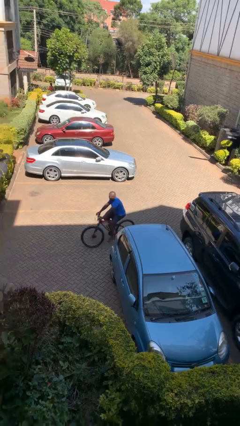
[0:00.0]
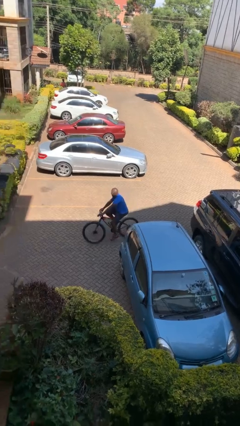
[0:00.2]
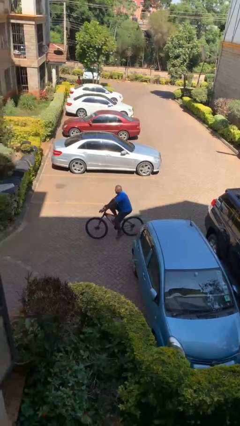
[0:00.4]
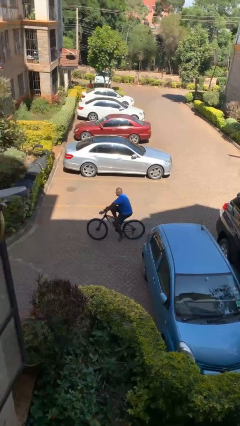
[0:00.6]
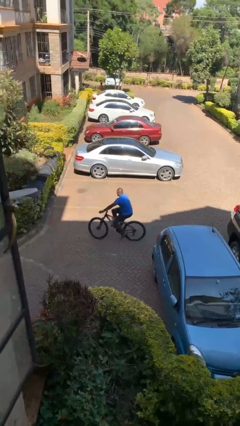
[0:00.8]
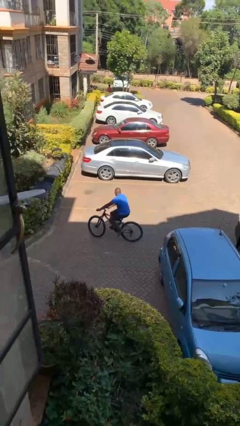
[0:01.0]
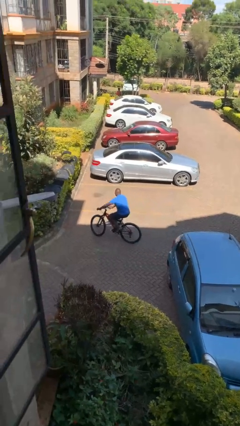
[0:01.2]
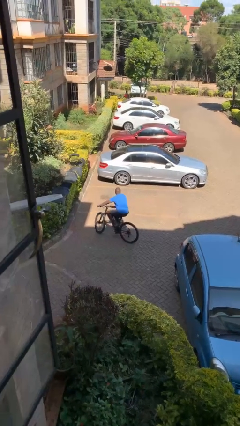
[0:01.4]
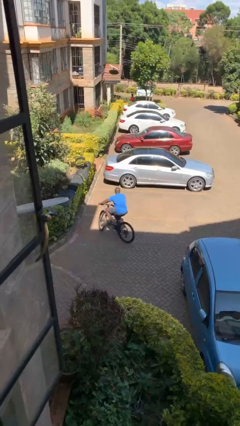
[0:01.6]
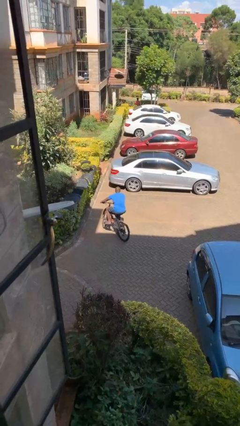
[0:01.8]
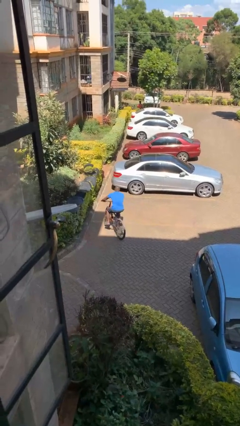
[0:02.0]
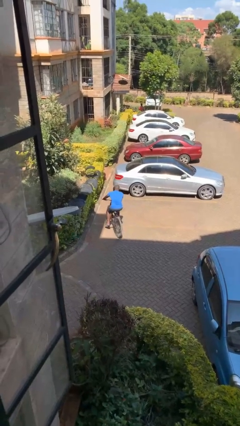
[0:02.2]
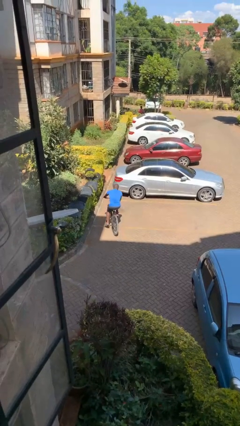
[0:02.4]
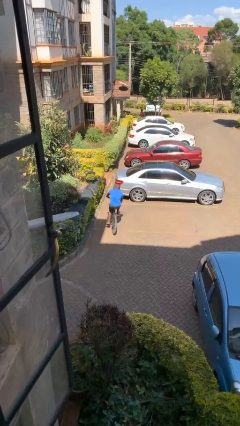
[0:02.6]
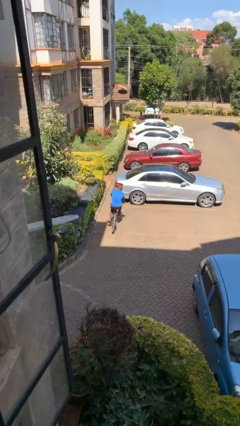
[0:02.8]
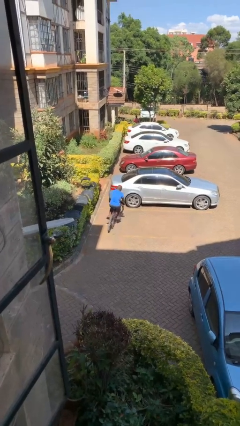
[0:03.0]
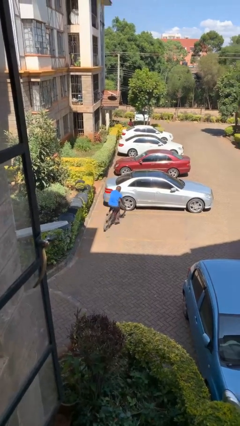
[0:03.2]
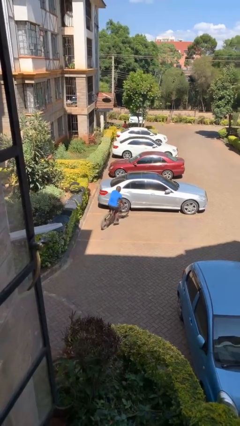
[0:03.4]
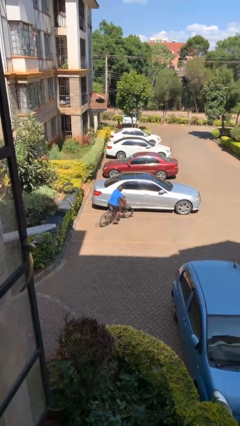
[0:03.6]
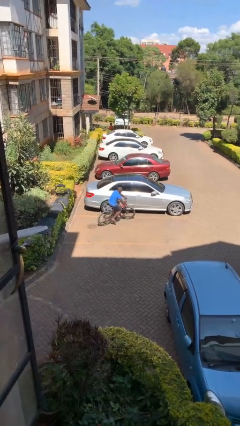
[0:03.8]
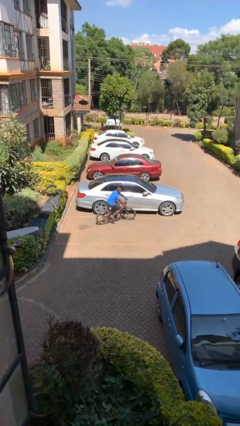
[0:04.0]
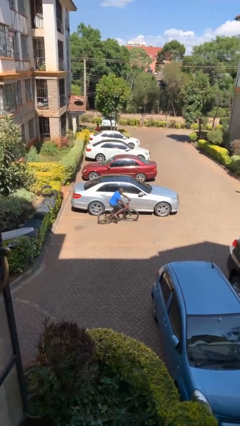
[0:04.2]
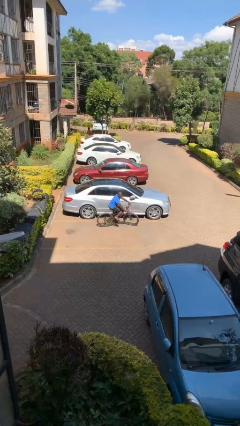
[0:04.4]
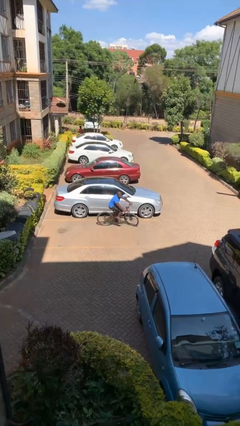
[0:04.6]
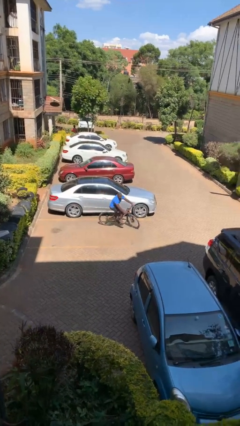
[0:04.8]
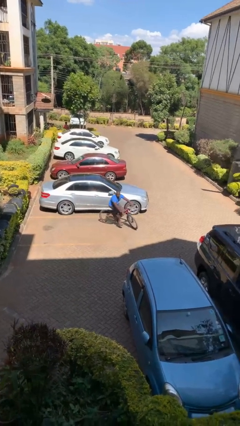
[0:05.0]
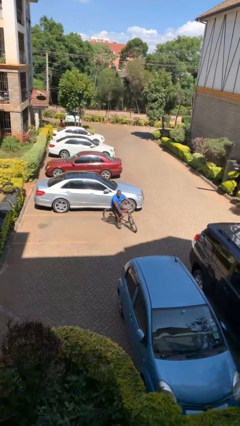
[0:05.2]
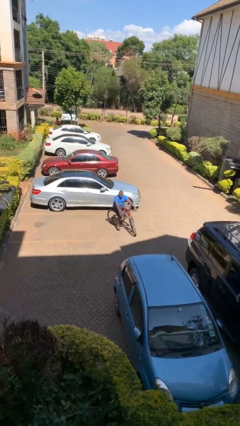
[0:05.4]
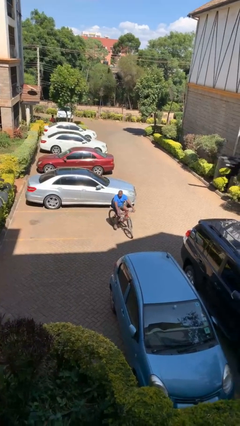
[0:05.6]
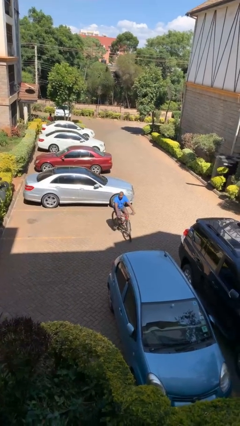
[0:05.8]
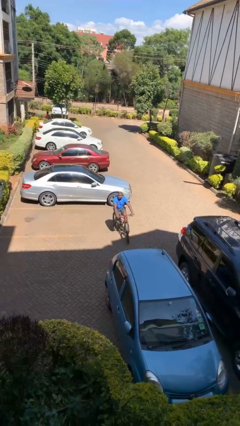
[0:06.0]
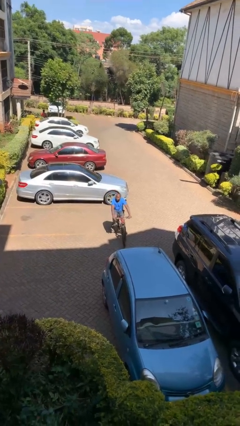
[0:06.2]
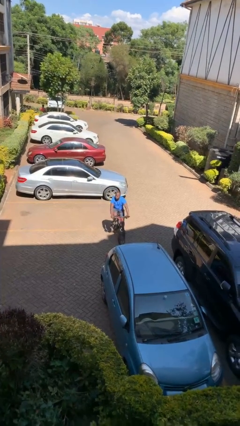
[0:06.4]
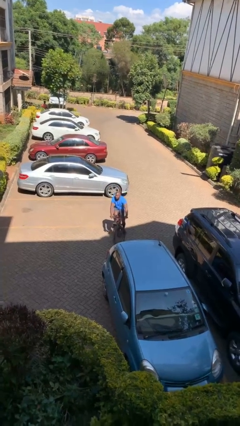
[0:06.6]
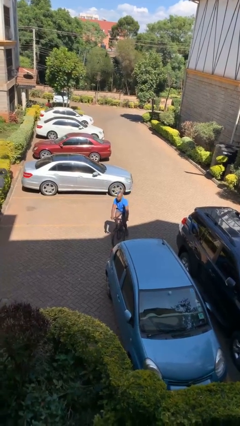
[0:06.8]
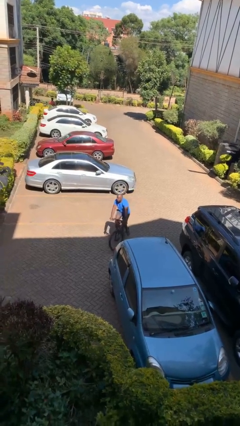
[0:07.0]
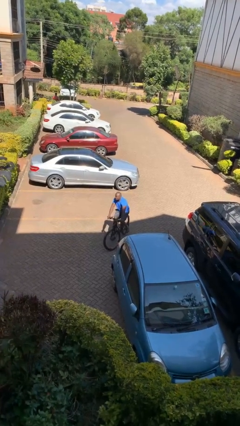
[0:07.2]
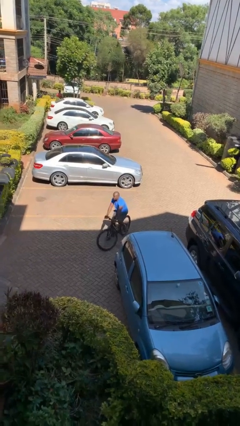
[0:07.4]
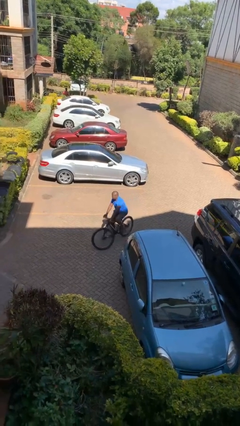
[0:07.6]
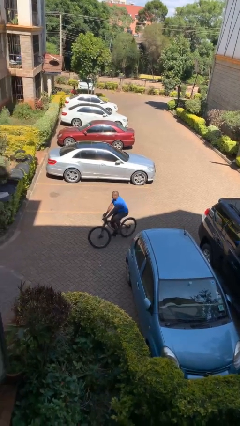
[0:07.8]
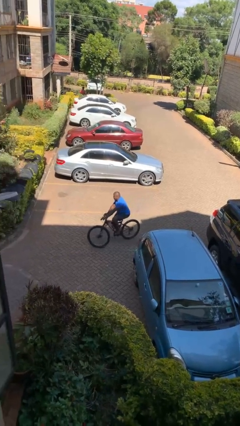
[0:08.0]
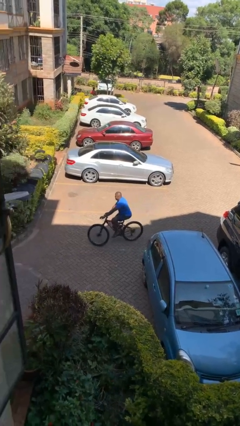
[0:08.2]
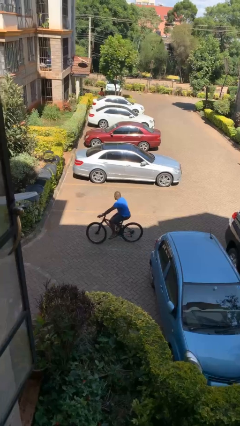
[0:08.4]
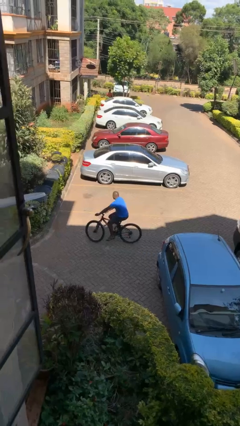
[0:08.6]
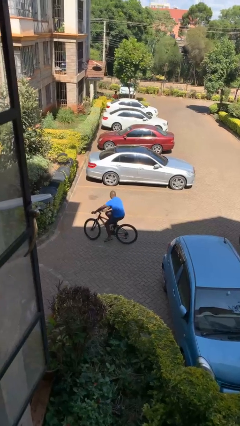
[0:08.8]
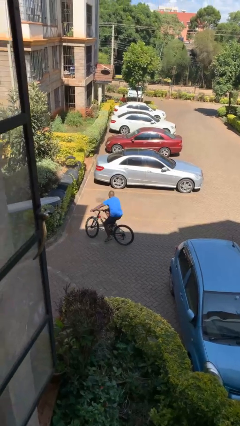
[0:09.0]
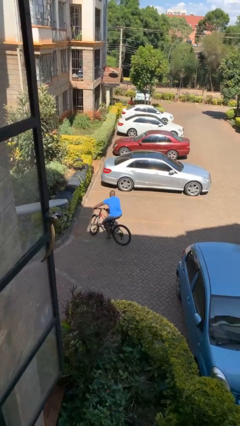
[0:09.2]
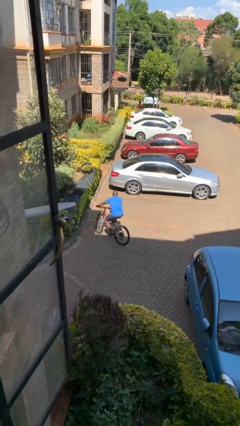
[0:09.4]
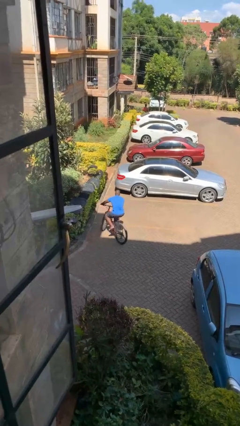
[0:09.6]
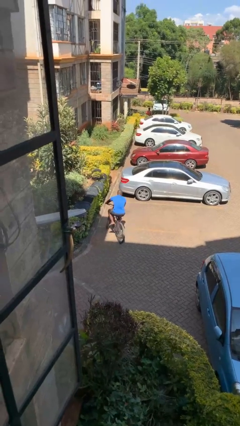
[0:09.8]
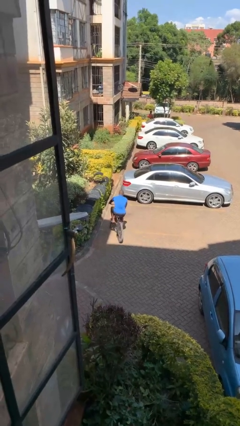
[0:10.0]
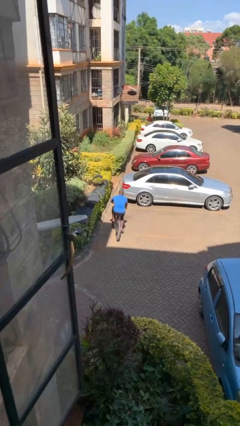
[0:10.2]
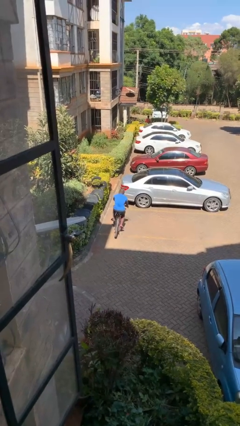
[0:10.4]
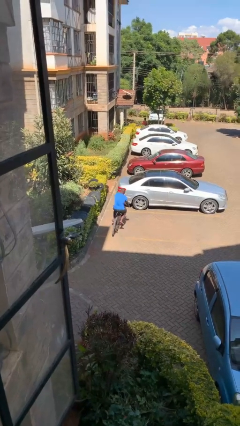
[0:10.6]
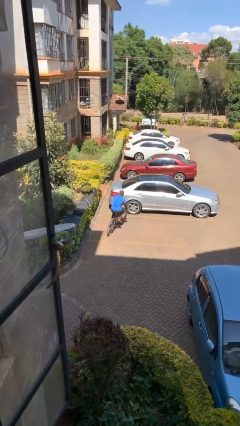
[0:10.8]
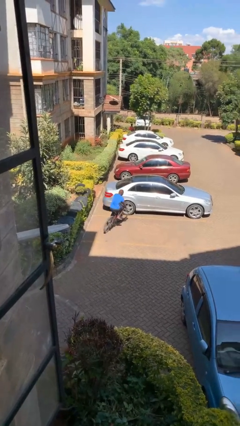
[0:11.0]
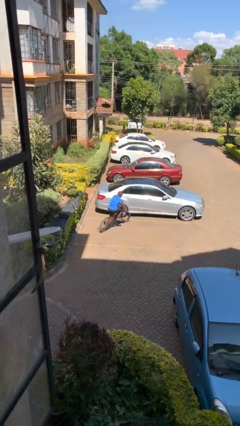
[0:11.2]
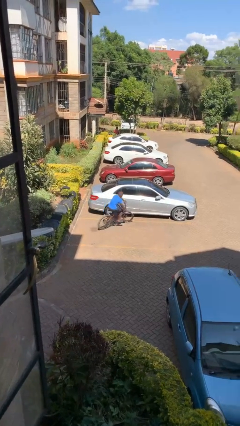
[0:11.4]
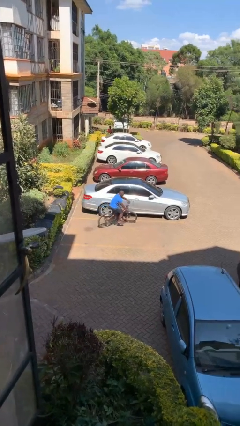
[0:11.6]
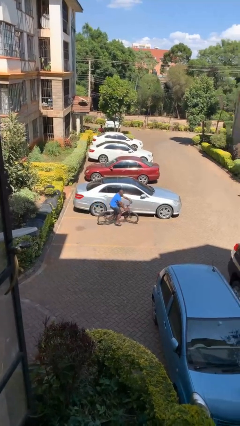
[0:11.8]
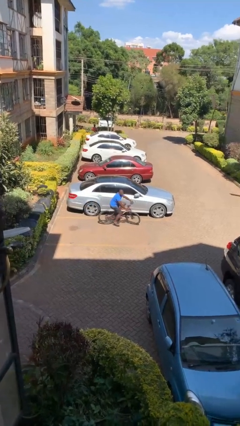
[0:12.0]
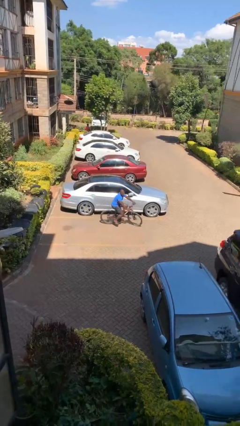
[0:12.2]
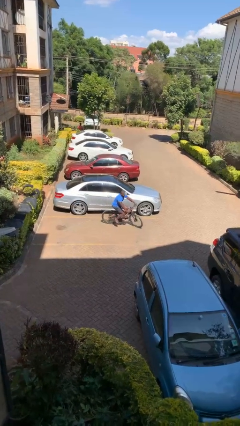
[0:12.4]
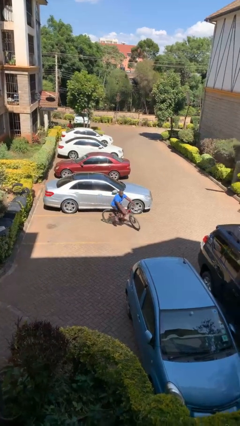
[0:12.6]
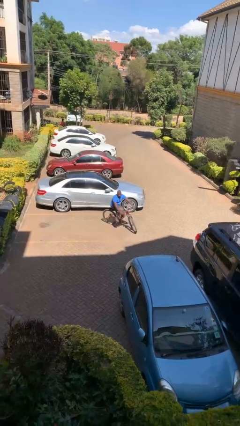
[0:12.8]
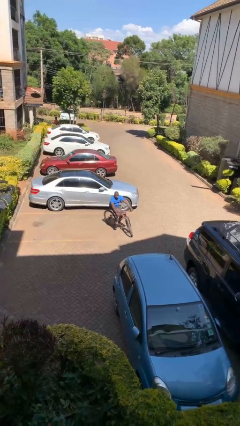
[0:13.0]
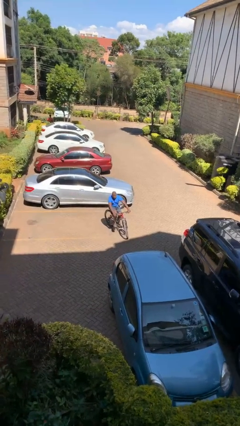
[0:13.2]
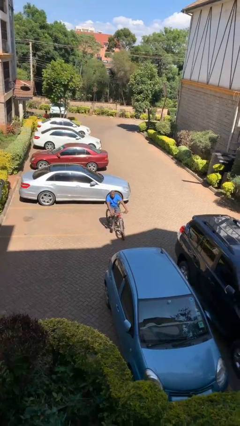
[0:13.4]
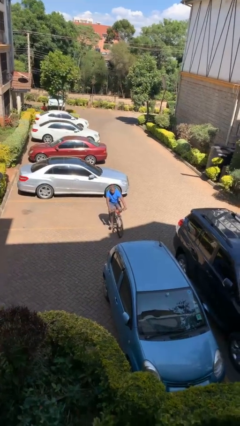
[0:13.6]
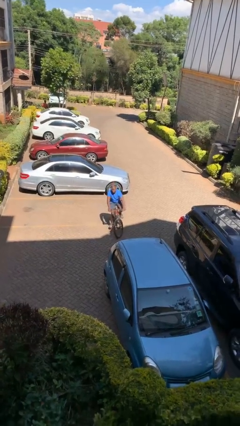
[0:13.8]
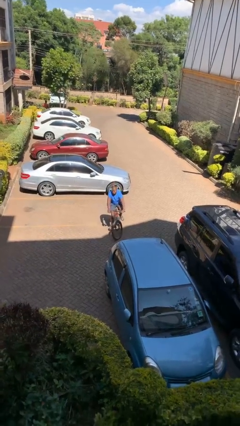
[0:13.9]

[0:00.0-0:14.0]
person rides bicycle

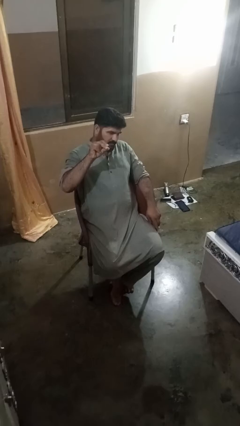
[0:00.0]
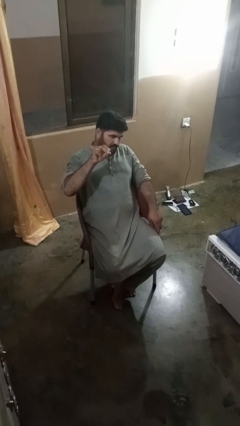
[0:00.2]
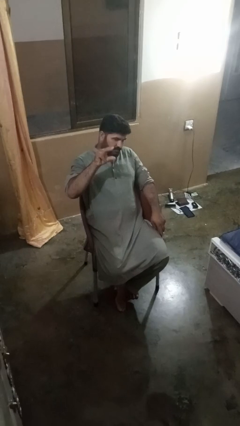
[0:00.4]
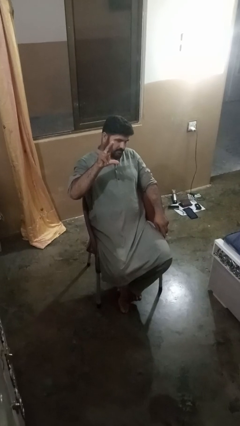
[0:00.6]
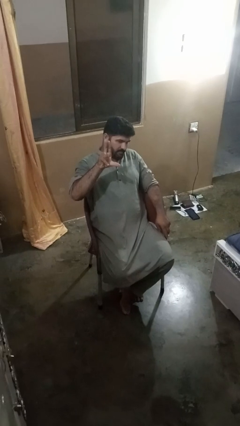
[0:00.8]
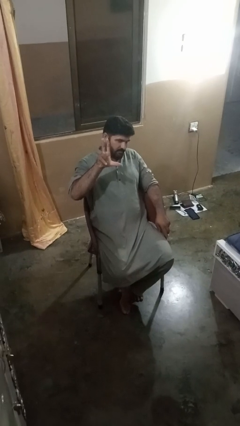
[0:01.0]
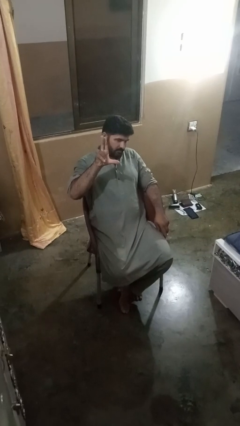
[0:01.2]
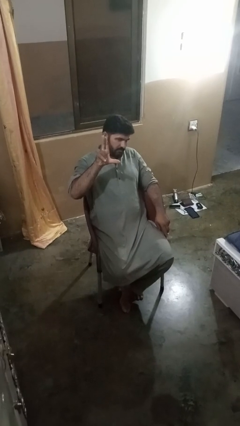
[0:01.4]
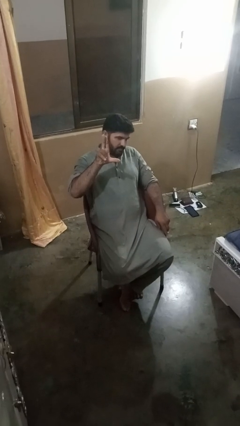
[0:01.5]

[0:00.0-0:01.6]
person gestures zoom out

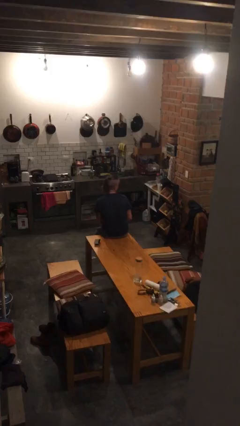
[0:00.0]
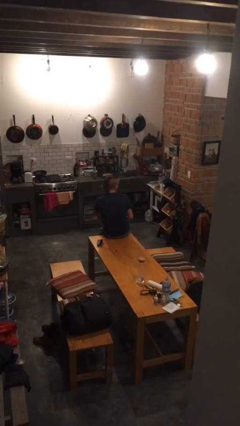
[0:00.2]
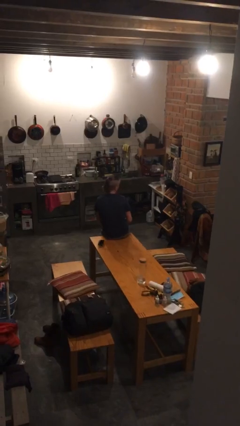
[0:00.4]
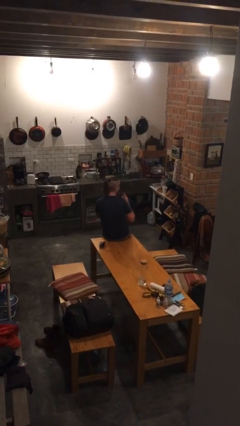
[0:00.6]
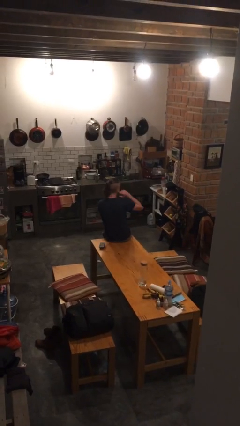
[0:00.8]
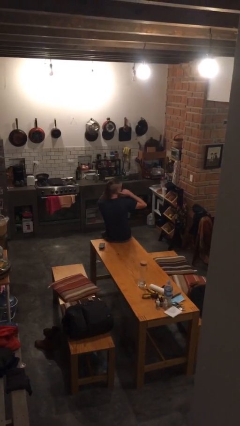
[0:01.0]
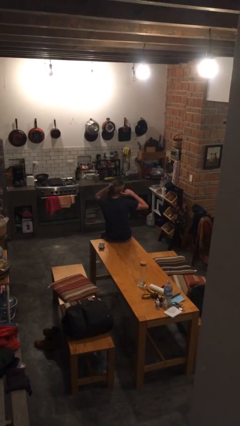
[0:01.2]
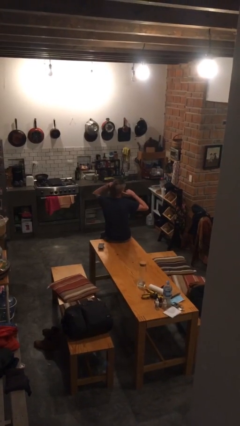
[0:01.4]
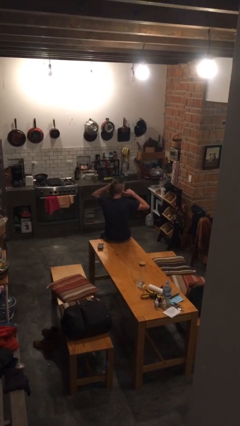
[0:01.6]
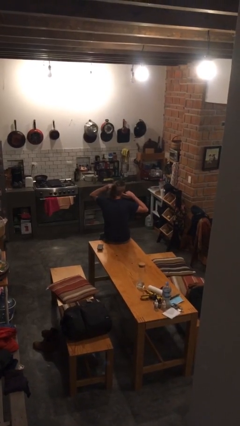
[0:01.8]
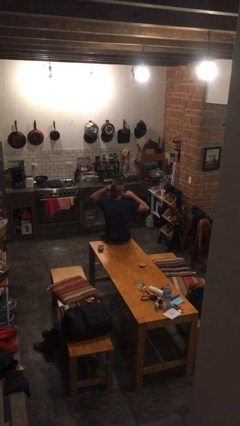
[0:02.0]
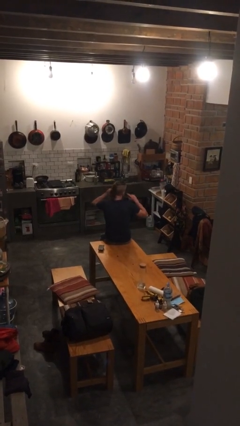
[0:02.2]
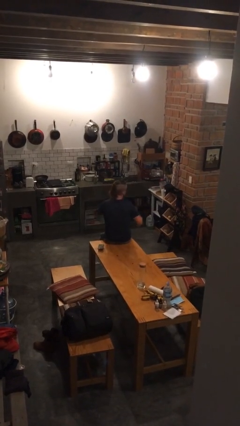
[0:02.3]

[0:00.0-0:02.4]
person puts fingers in ear
